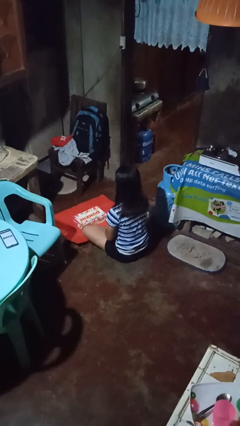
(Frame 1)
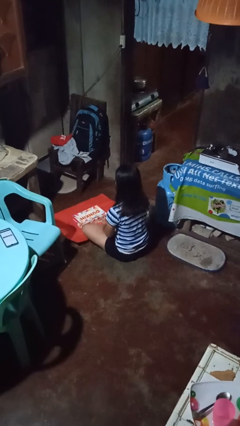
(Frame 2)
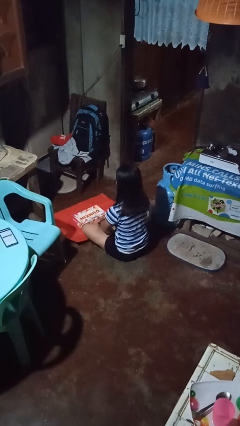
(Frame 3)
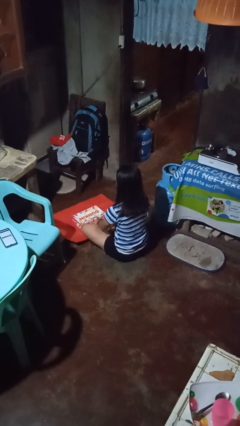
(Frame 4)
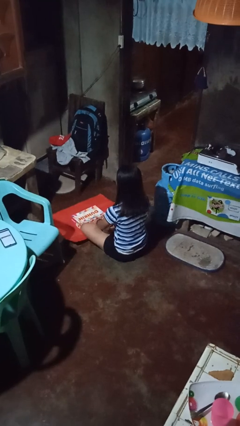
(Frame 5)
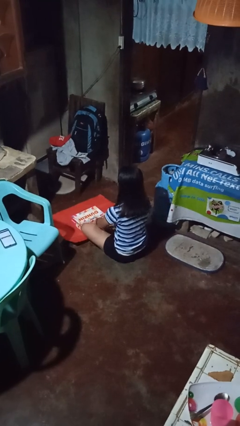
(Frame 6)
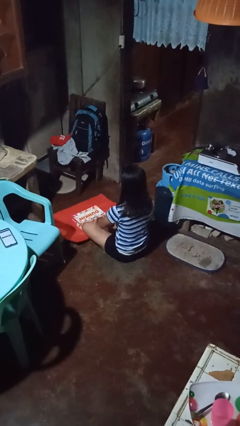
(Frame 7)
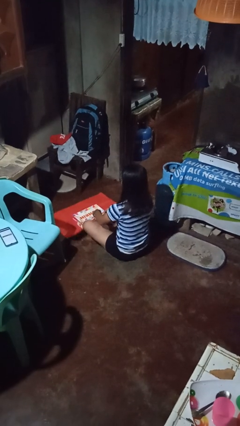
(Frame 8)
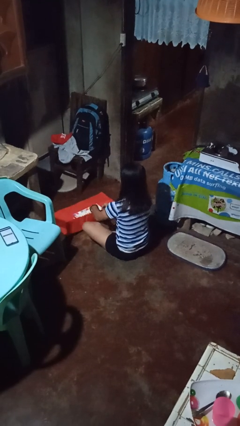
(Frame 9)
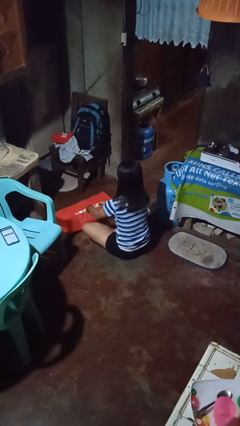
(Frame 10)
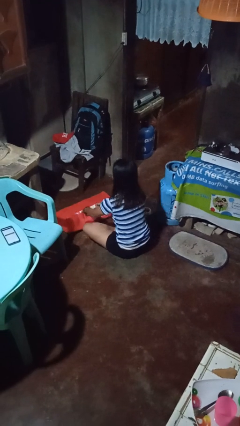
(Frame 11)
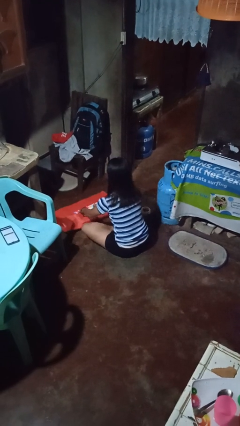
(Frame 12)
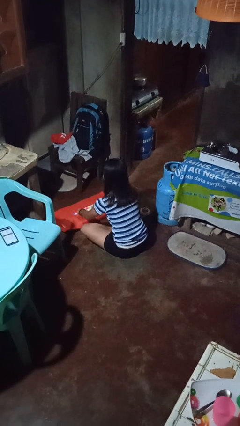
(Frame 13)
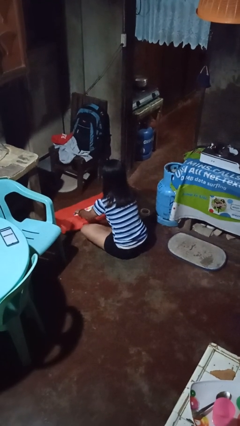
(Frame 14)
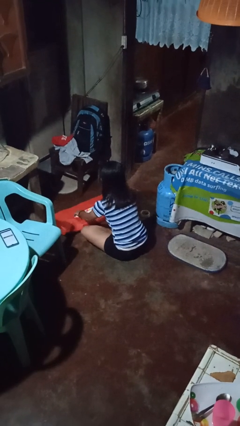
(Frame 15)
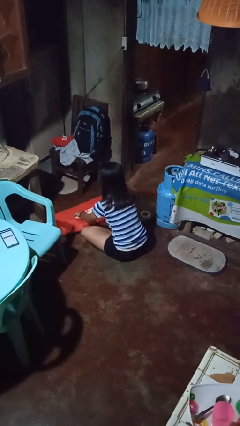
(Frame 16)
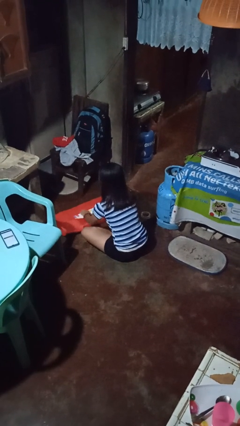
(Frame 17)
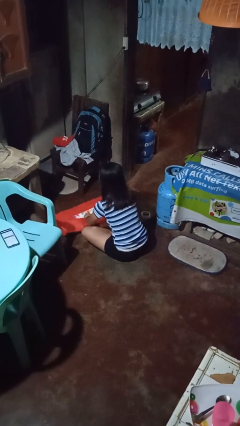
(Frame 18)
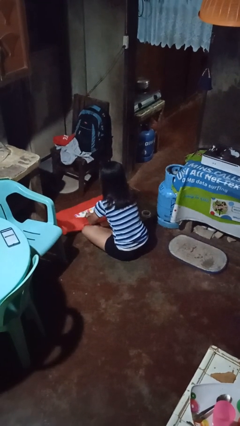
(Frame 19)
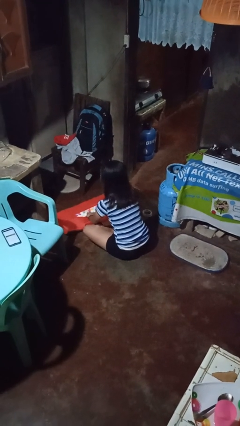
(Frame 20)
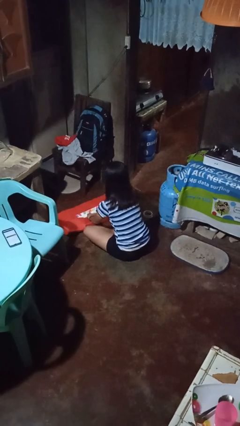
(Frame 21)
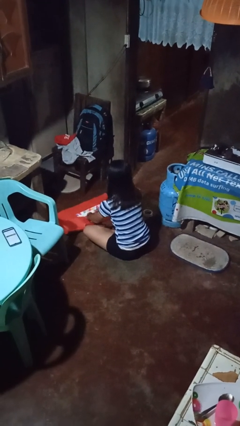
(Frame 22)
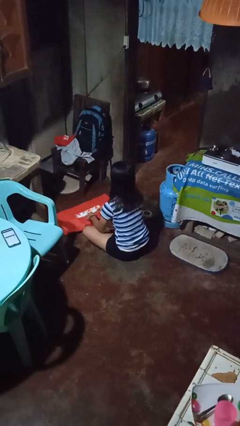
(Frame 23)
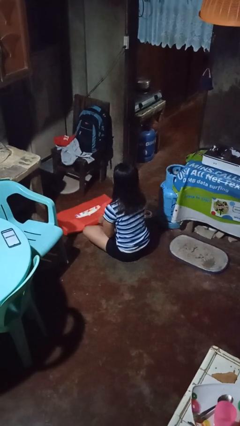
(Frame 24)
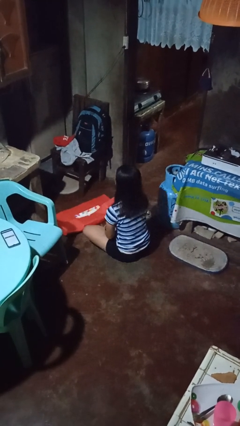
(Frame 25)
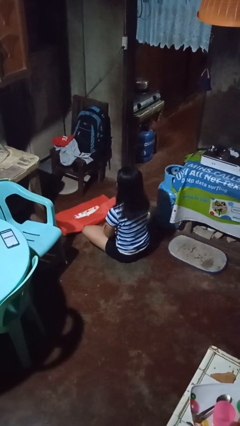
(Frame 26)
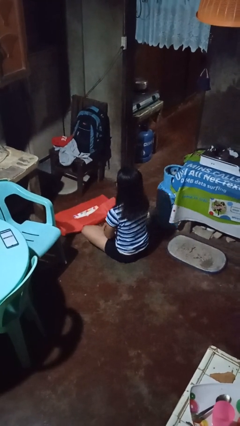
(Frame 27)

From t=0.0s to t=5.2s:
person wraps box

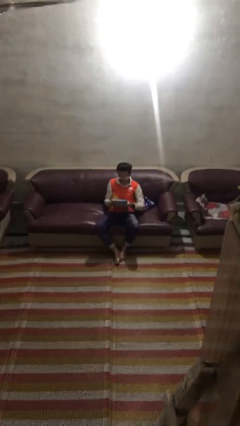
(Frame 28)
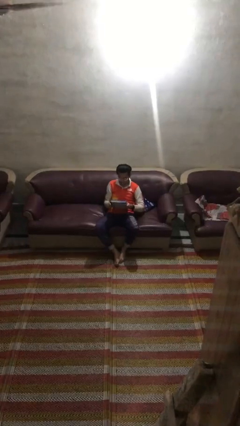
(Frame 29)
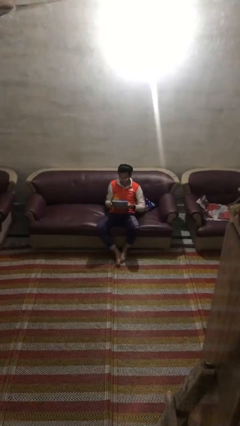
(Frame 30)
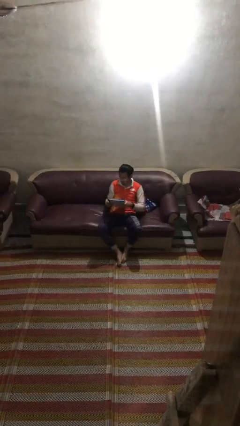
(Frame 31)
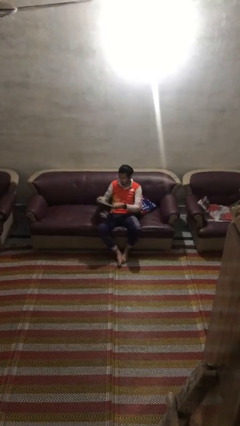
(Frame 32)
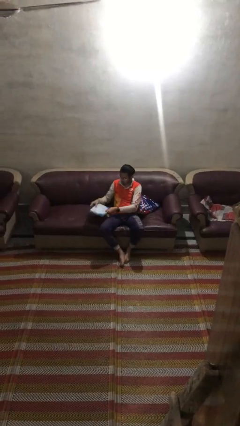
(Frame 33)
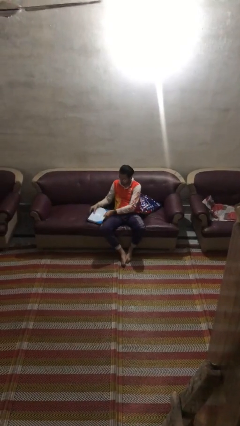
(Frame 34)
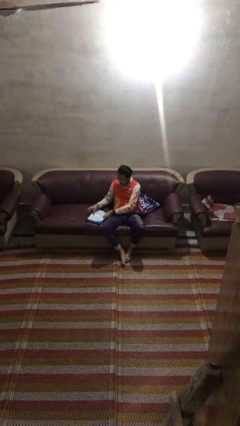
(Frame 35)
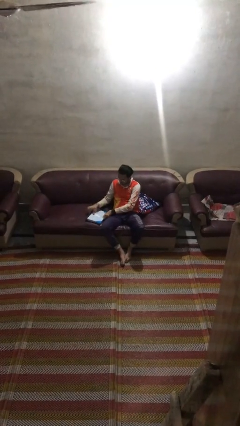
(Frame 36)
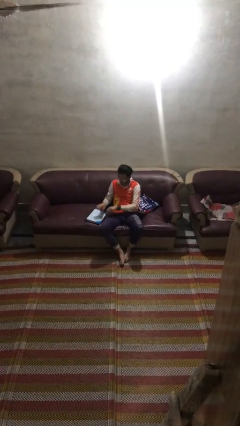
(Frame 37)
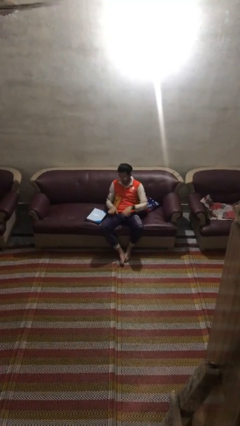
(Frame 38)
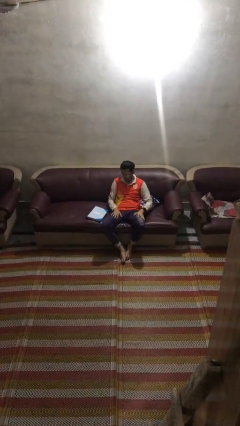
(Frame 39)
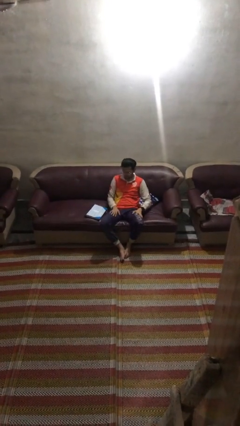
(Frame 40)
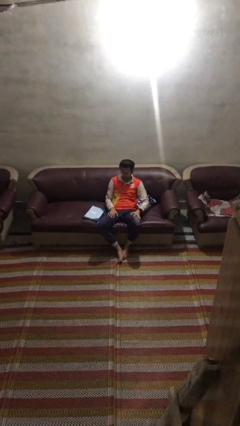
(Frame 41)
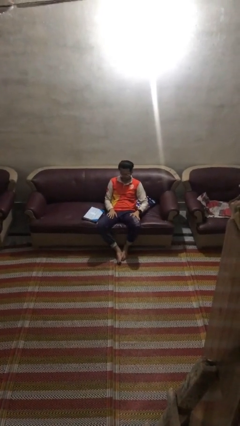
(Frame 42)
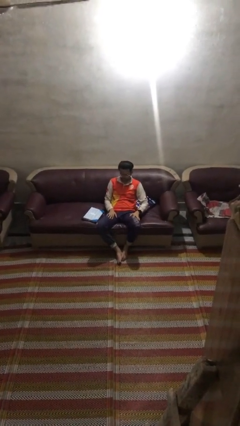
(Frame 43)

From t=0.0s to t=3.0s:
person puts down object on couch

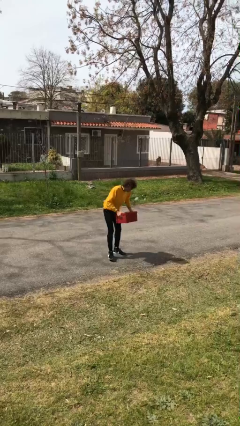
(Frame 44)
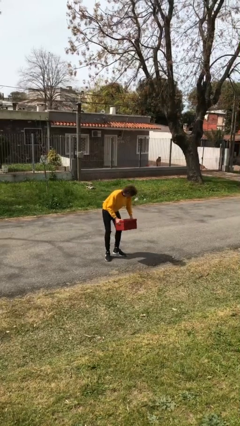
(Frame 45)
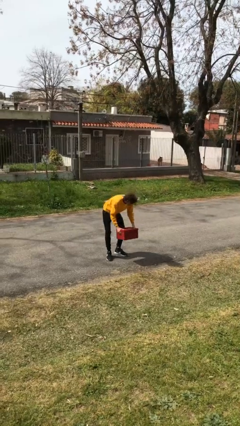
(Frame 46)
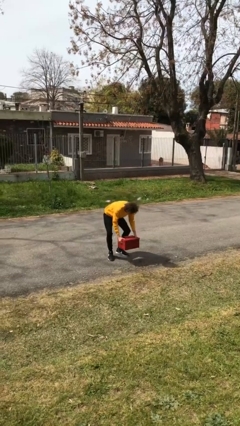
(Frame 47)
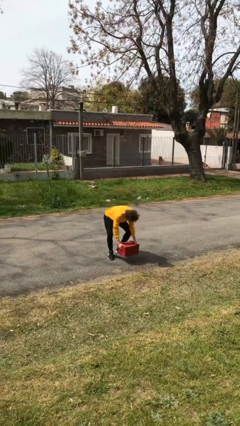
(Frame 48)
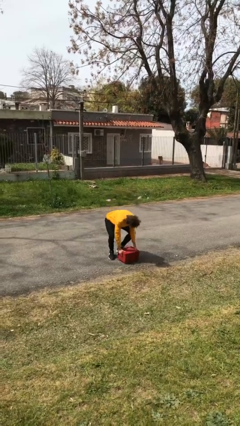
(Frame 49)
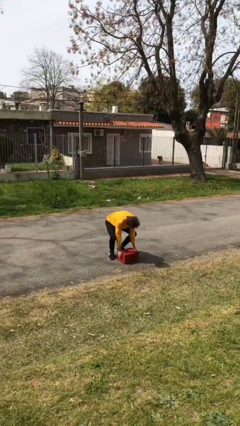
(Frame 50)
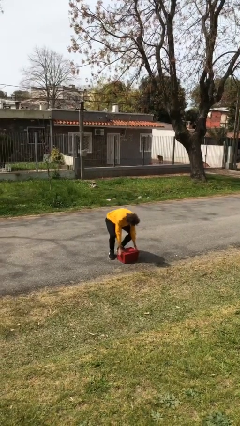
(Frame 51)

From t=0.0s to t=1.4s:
person puts down object on floor

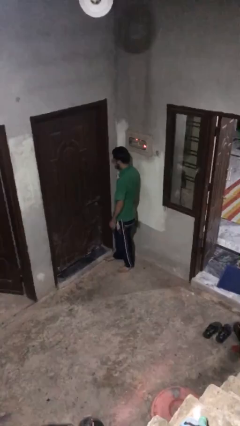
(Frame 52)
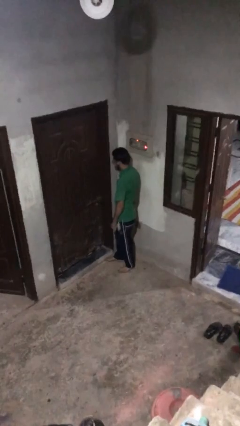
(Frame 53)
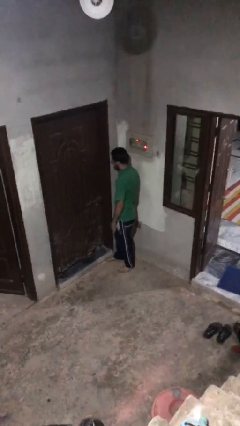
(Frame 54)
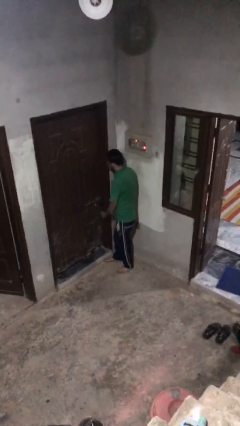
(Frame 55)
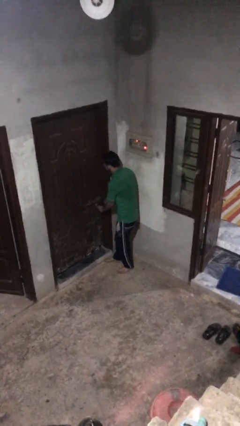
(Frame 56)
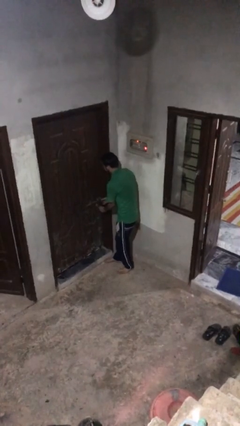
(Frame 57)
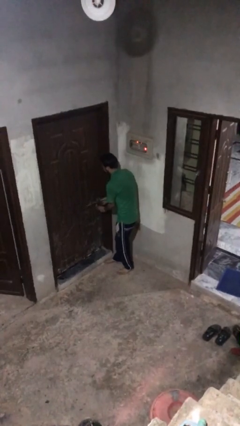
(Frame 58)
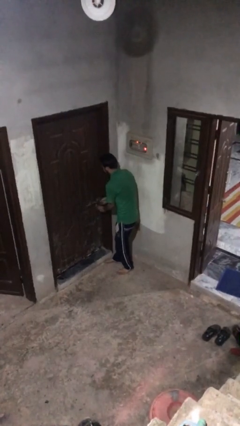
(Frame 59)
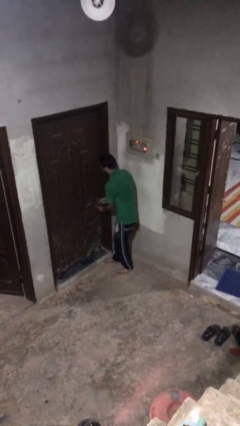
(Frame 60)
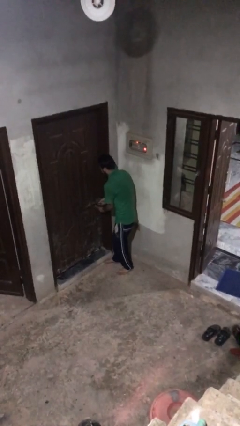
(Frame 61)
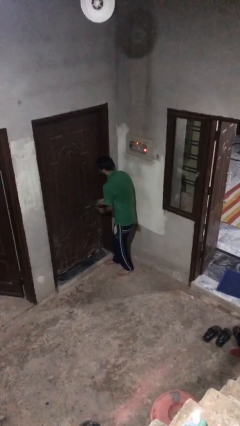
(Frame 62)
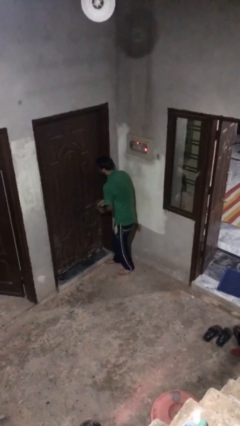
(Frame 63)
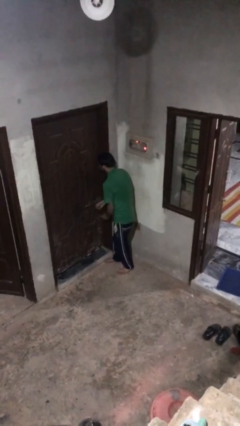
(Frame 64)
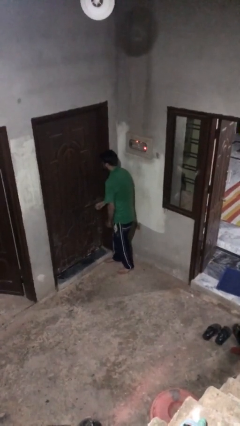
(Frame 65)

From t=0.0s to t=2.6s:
person unlocks door with keys

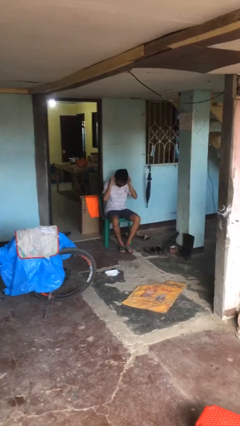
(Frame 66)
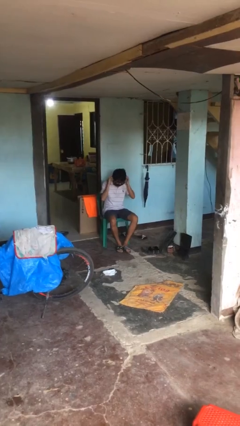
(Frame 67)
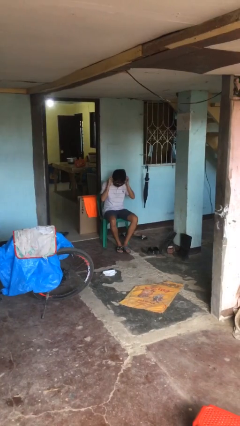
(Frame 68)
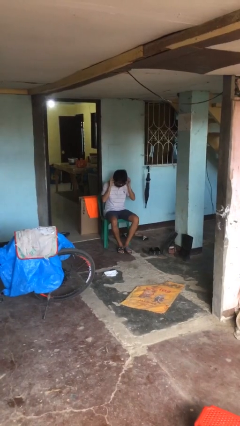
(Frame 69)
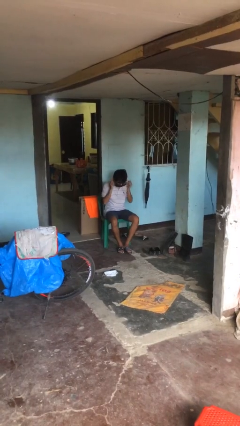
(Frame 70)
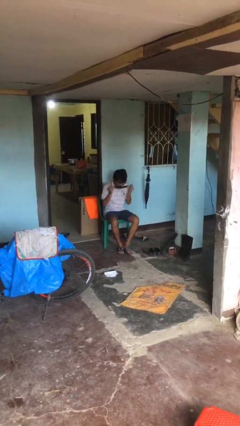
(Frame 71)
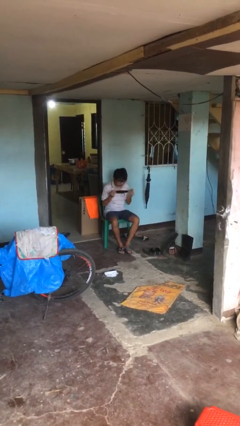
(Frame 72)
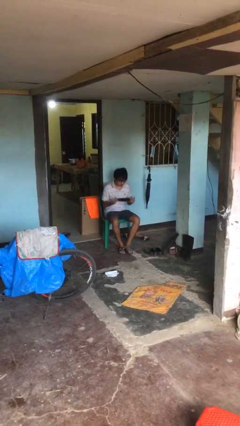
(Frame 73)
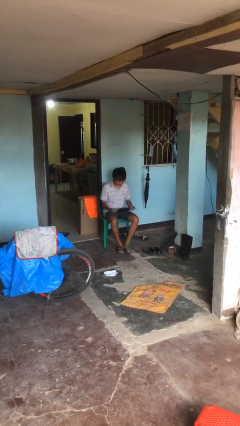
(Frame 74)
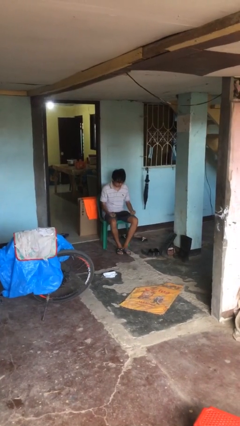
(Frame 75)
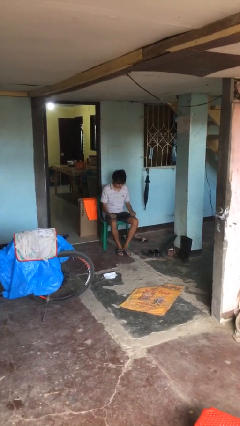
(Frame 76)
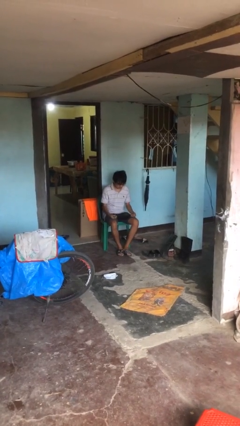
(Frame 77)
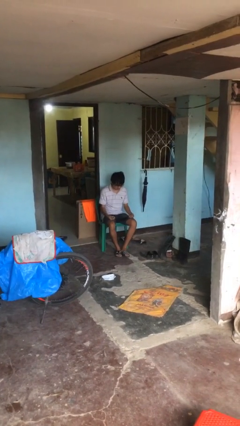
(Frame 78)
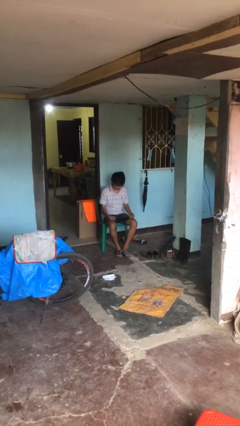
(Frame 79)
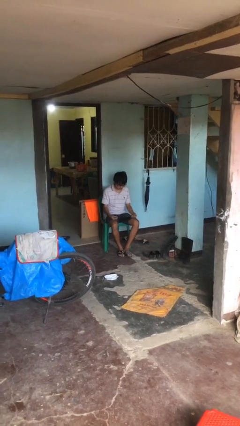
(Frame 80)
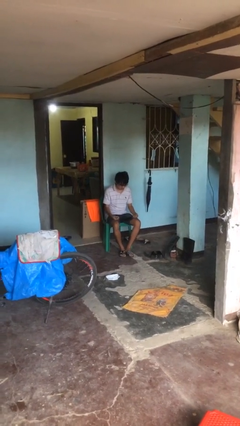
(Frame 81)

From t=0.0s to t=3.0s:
person takes off facemask

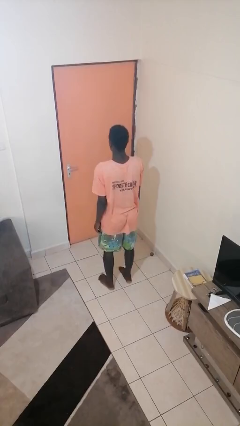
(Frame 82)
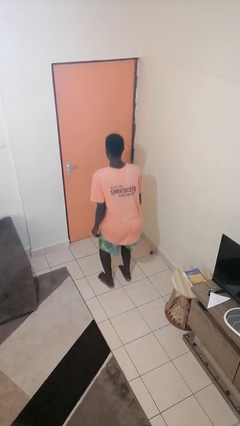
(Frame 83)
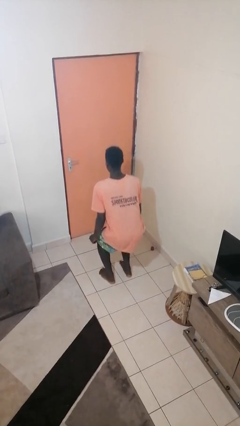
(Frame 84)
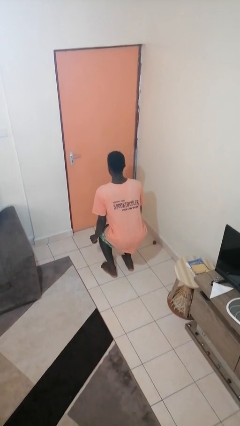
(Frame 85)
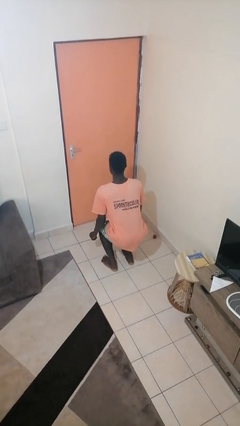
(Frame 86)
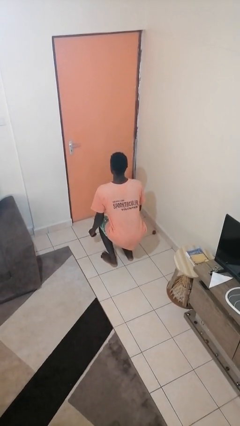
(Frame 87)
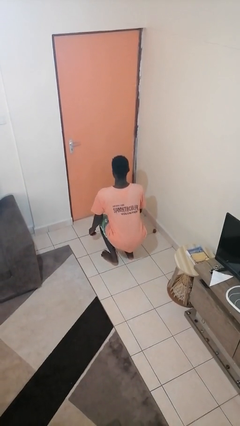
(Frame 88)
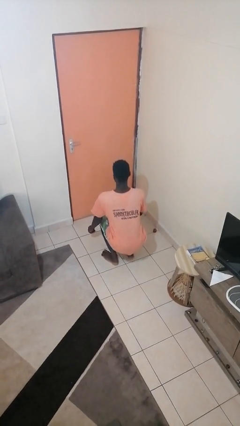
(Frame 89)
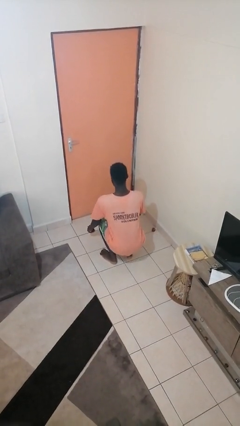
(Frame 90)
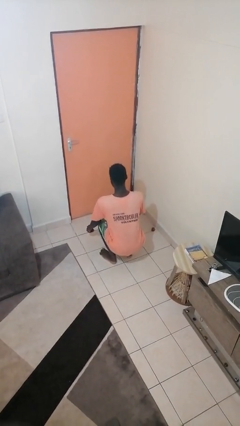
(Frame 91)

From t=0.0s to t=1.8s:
person squats

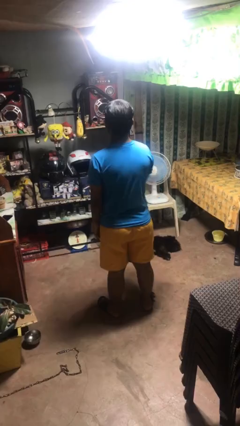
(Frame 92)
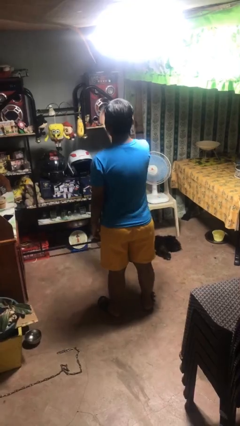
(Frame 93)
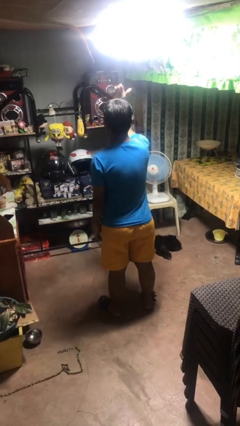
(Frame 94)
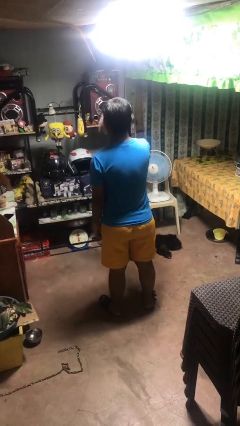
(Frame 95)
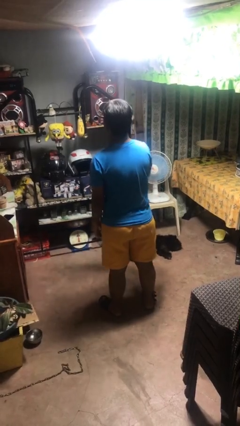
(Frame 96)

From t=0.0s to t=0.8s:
person gestures swipe up
